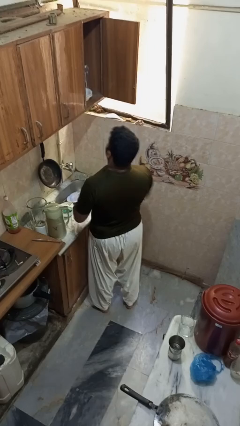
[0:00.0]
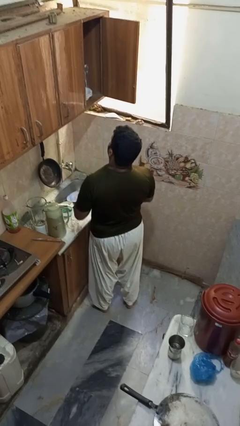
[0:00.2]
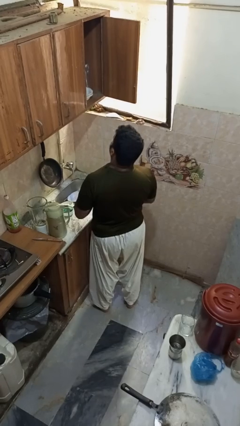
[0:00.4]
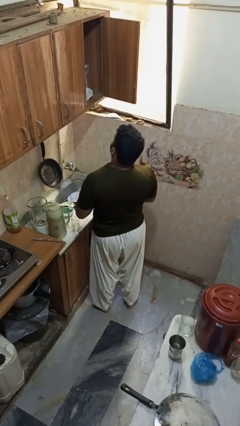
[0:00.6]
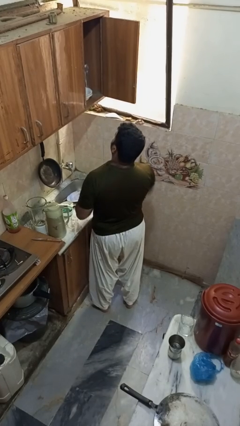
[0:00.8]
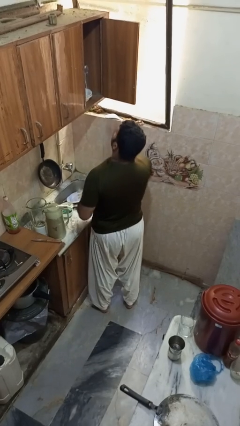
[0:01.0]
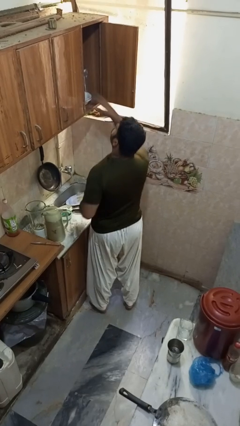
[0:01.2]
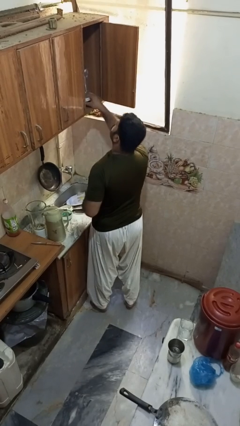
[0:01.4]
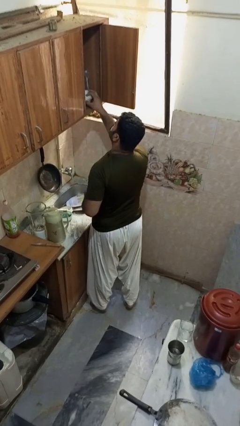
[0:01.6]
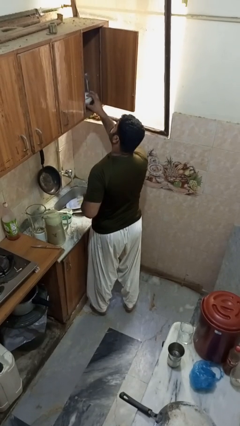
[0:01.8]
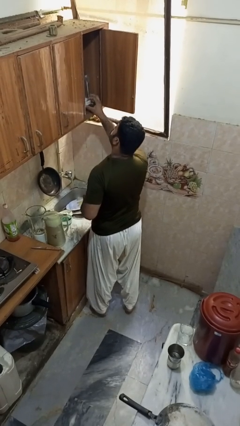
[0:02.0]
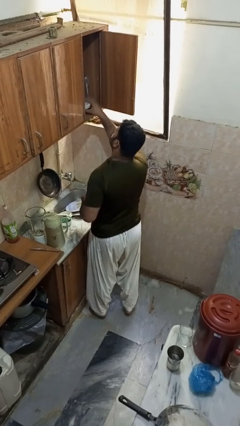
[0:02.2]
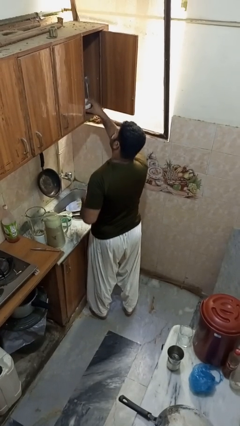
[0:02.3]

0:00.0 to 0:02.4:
person takes object from cabinet

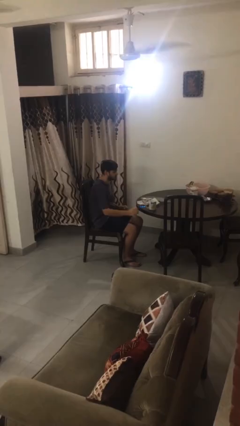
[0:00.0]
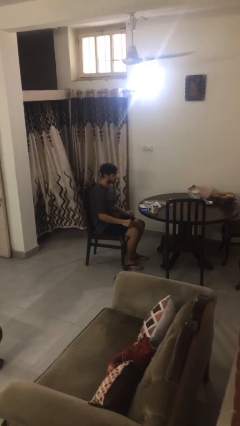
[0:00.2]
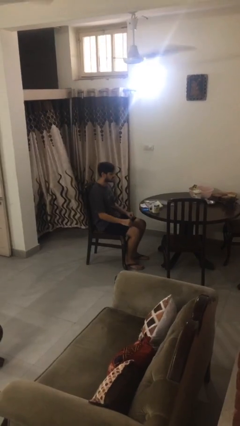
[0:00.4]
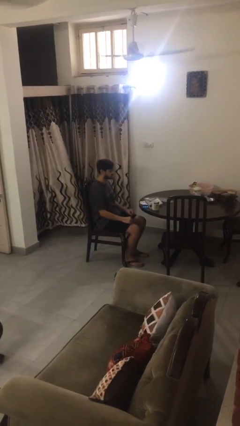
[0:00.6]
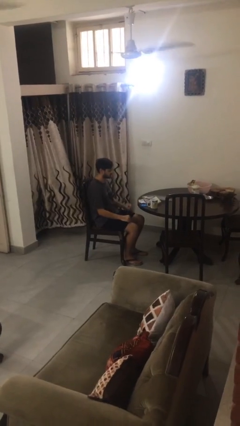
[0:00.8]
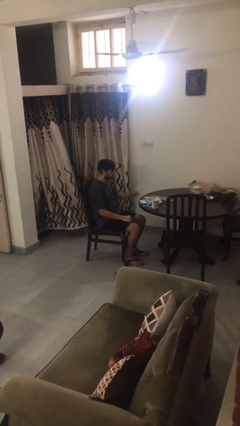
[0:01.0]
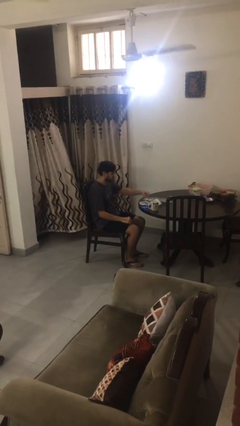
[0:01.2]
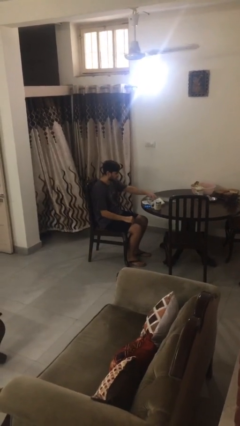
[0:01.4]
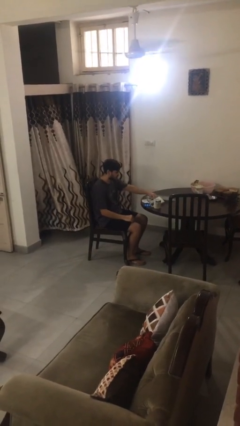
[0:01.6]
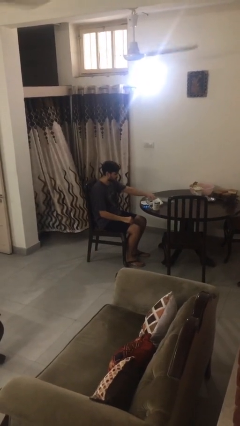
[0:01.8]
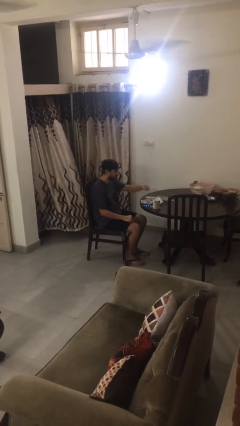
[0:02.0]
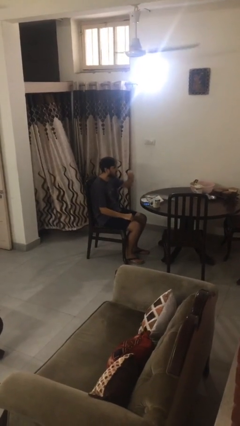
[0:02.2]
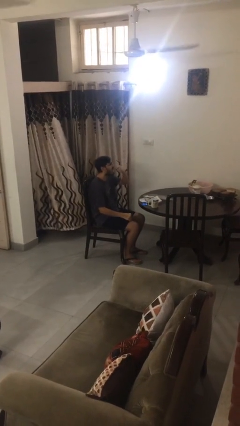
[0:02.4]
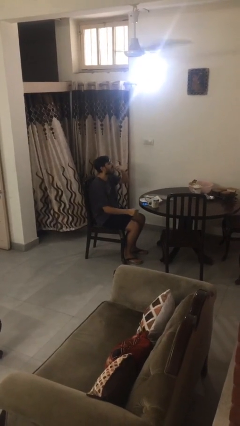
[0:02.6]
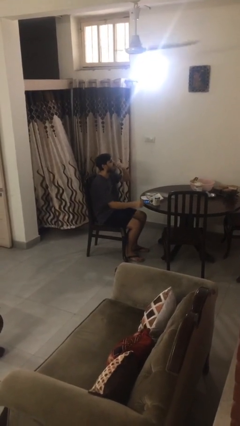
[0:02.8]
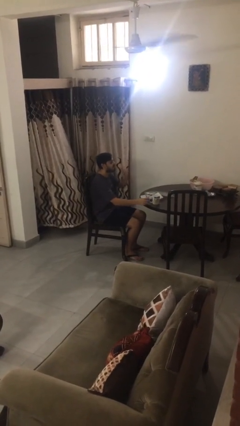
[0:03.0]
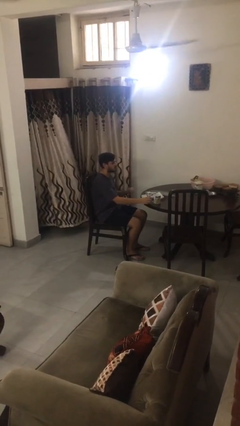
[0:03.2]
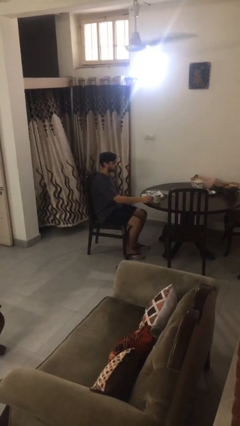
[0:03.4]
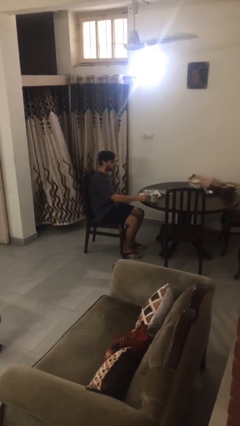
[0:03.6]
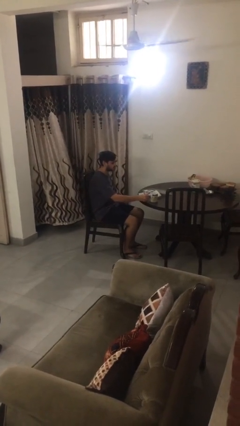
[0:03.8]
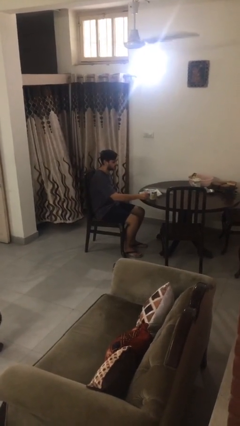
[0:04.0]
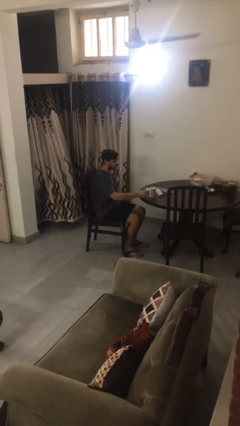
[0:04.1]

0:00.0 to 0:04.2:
person takes medicine pills

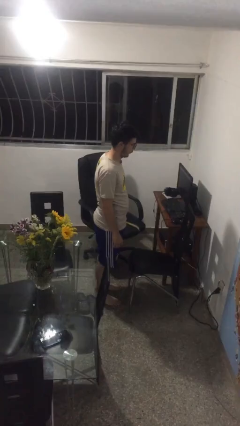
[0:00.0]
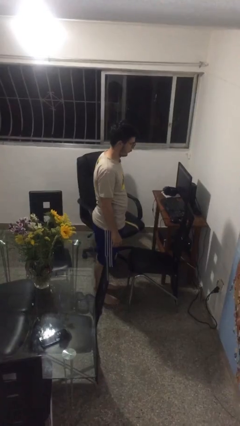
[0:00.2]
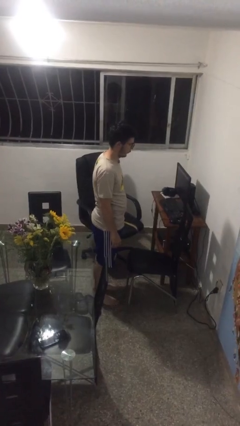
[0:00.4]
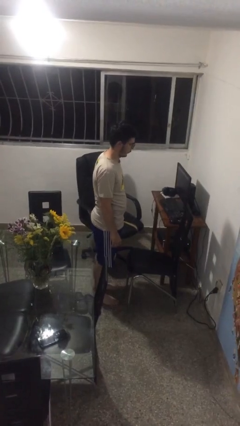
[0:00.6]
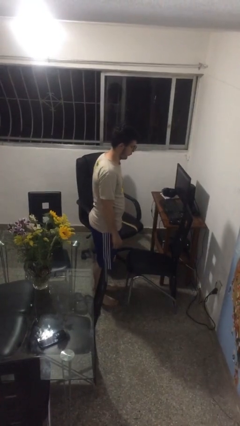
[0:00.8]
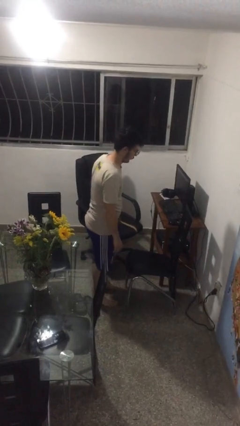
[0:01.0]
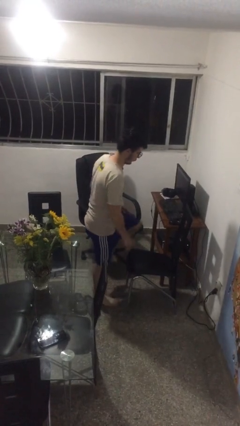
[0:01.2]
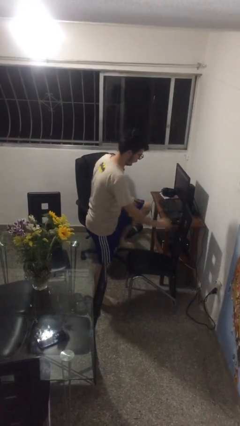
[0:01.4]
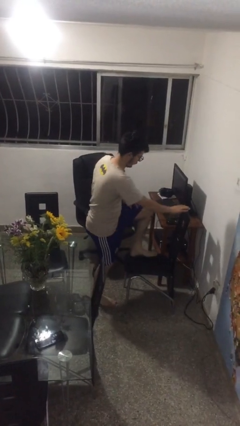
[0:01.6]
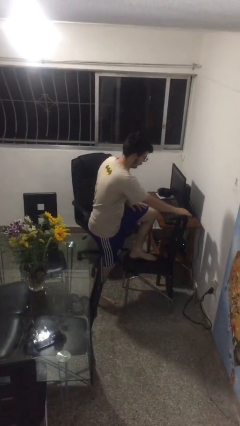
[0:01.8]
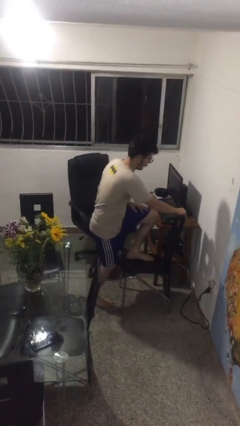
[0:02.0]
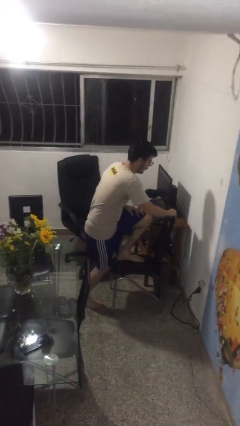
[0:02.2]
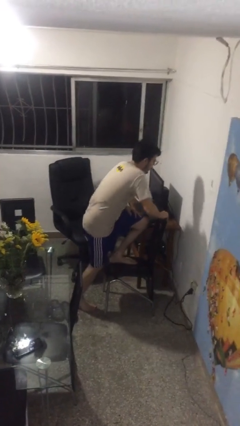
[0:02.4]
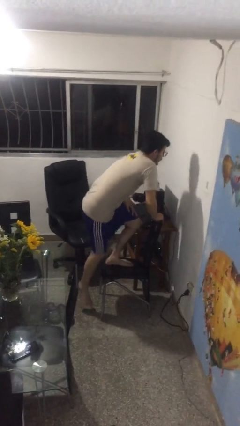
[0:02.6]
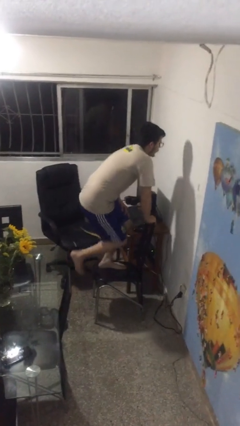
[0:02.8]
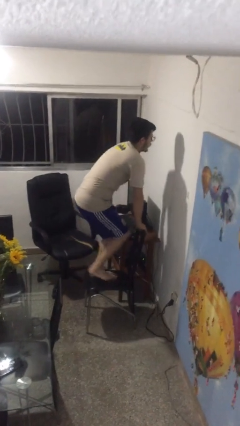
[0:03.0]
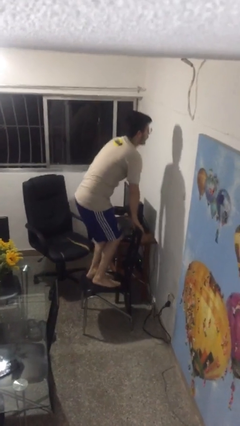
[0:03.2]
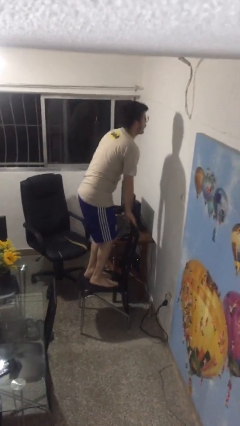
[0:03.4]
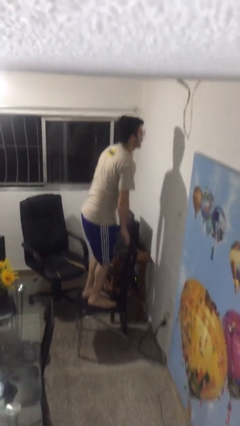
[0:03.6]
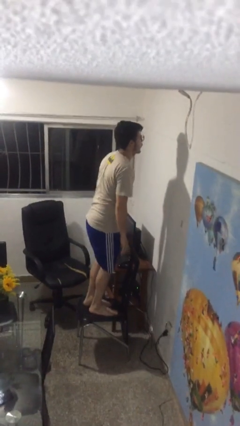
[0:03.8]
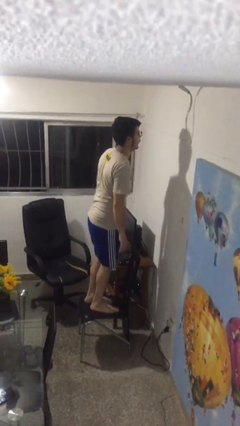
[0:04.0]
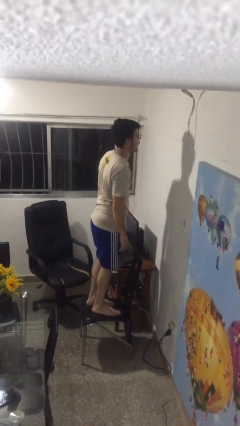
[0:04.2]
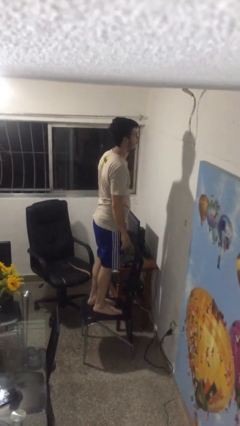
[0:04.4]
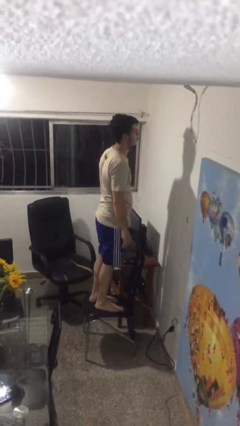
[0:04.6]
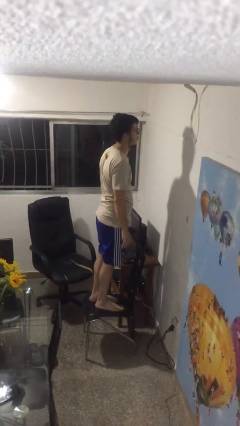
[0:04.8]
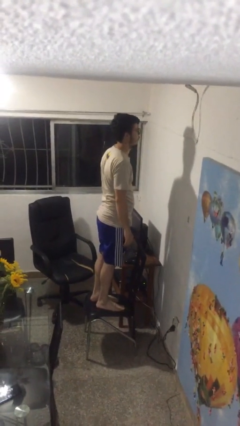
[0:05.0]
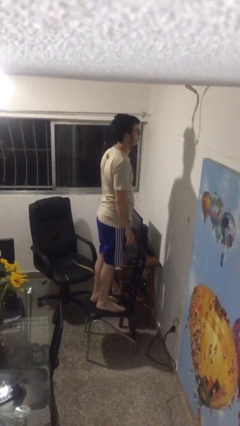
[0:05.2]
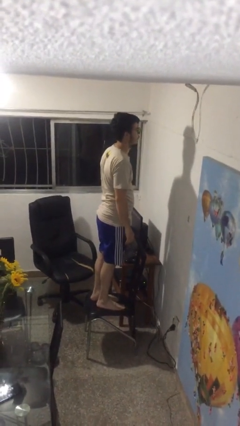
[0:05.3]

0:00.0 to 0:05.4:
person climbs on chair

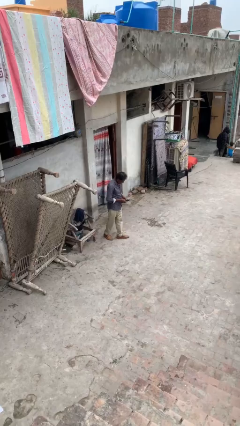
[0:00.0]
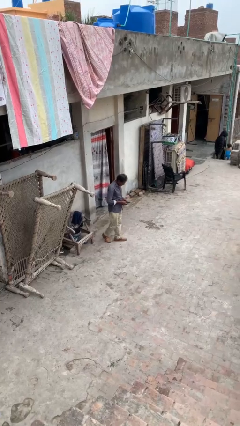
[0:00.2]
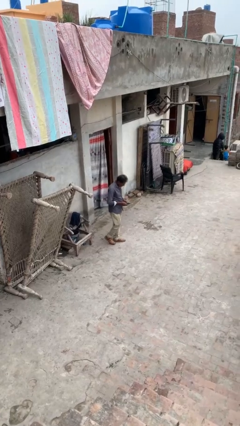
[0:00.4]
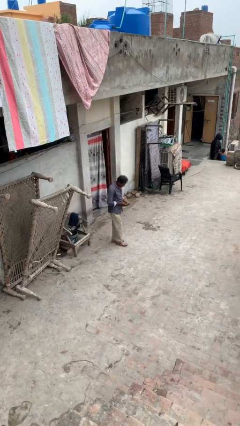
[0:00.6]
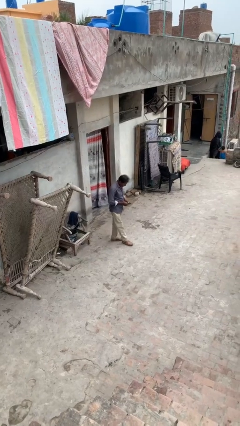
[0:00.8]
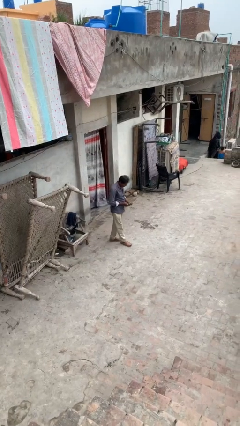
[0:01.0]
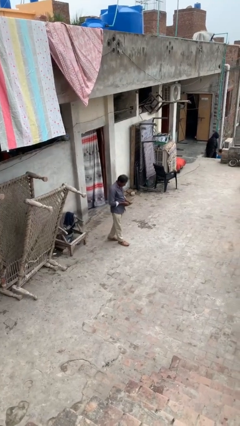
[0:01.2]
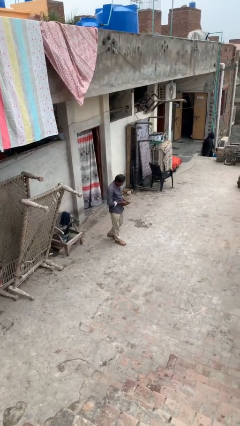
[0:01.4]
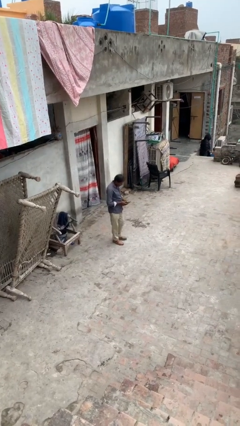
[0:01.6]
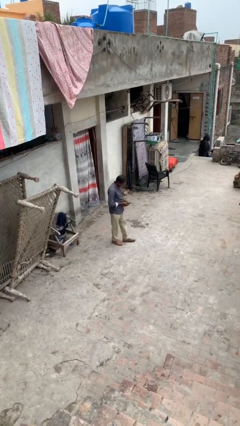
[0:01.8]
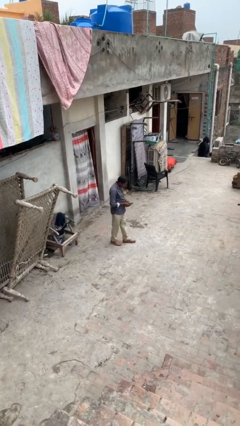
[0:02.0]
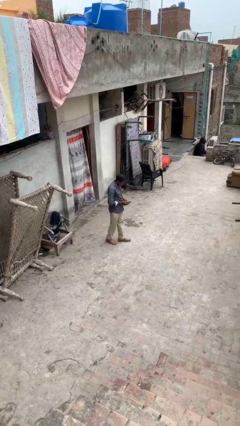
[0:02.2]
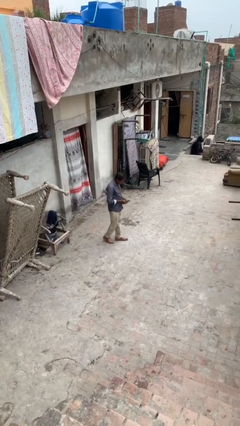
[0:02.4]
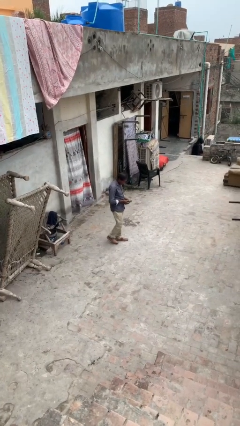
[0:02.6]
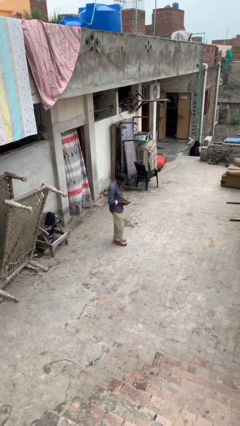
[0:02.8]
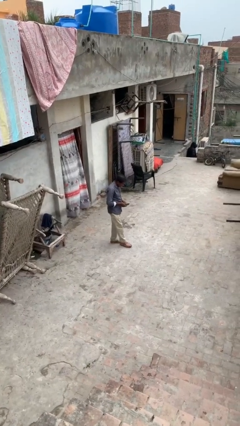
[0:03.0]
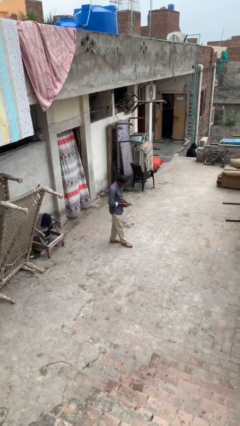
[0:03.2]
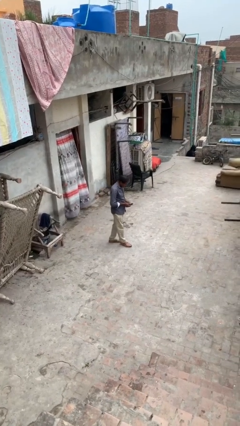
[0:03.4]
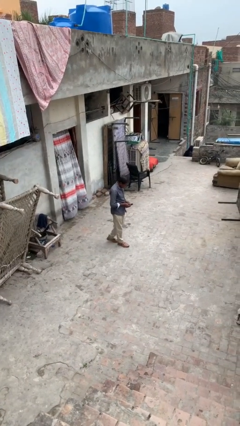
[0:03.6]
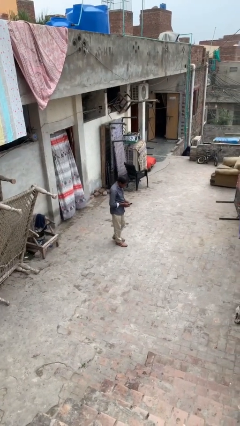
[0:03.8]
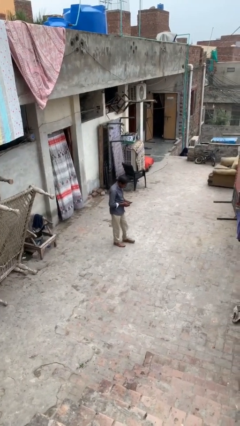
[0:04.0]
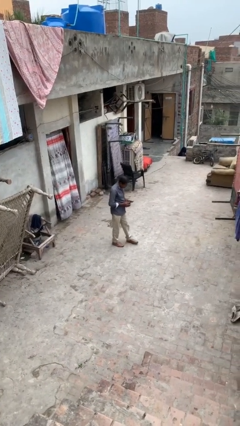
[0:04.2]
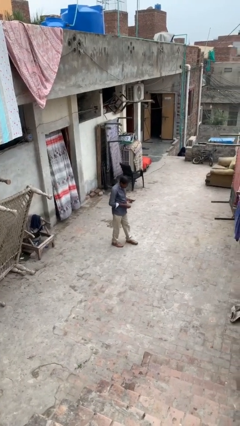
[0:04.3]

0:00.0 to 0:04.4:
person texts on phone

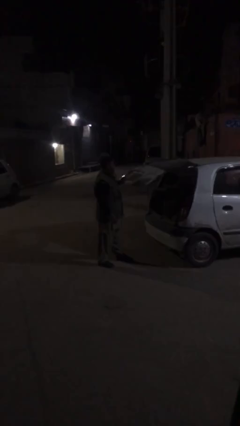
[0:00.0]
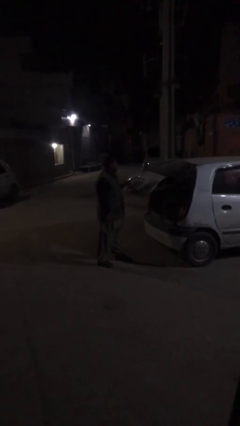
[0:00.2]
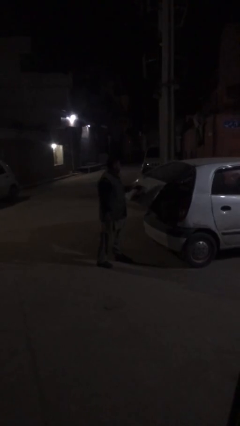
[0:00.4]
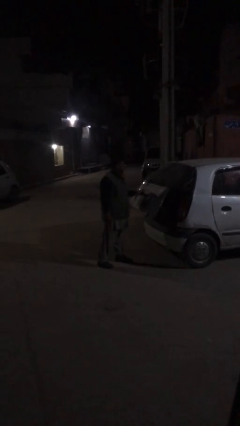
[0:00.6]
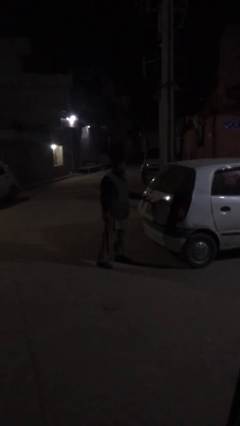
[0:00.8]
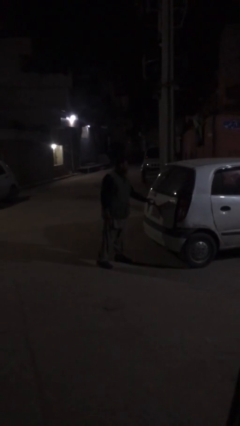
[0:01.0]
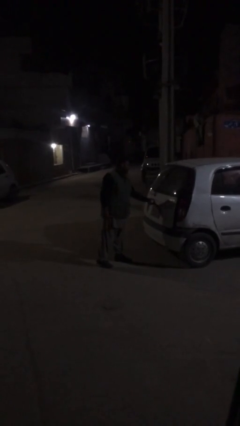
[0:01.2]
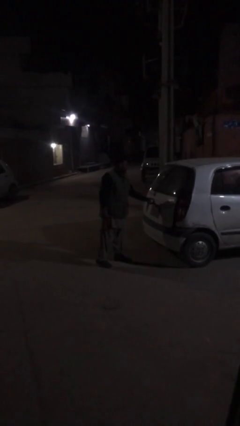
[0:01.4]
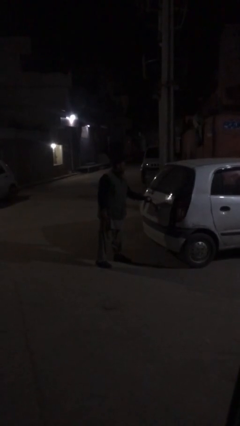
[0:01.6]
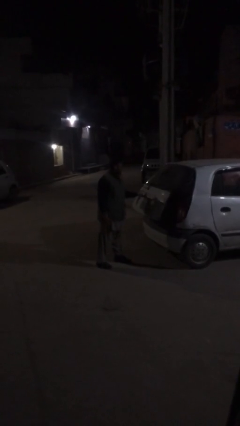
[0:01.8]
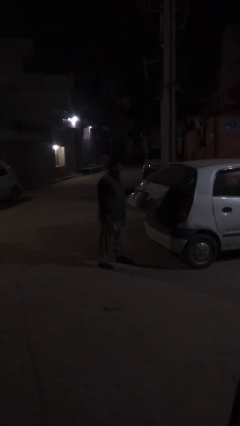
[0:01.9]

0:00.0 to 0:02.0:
person closes car trunk
